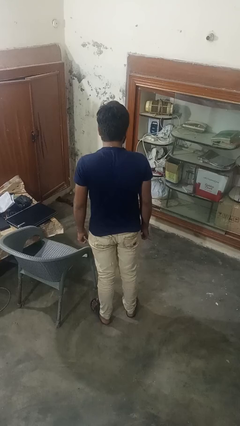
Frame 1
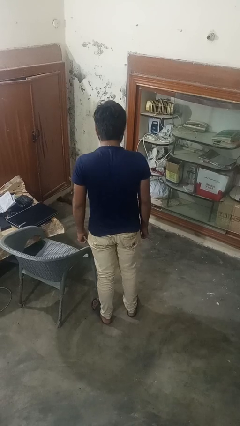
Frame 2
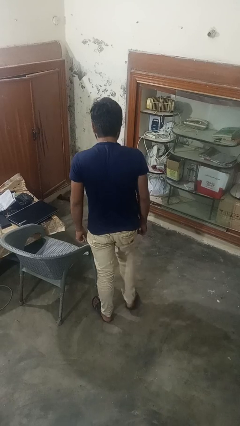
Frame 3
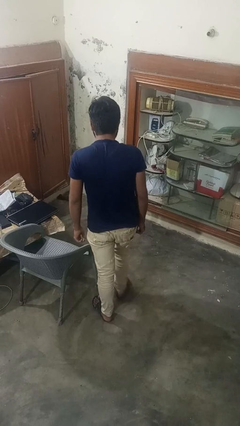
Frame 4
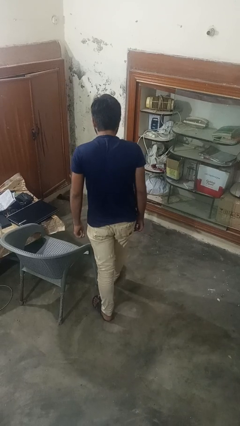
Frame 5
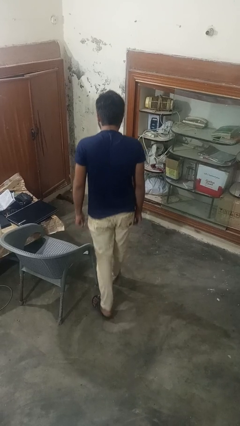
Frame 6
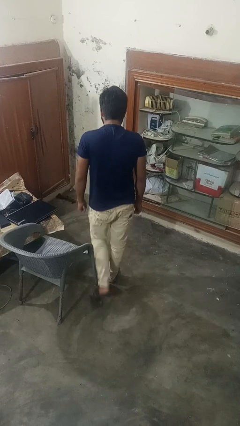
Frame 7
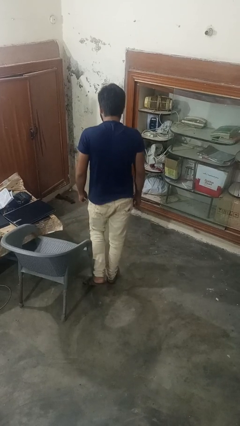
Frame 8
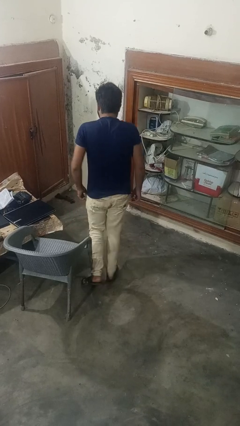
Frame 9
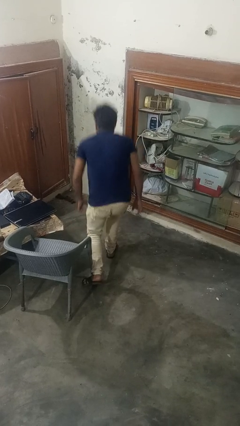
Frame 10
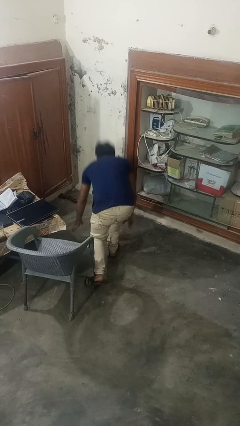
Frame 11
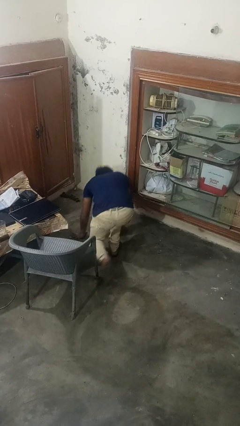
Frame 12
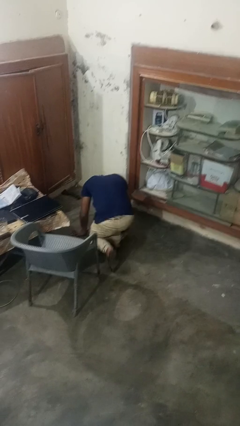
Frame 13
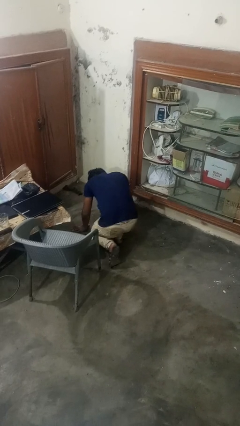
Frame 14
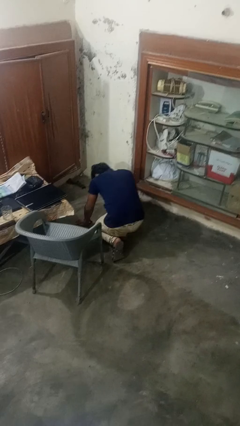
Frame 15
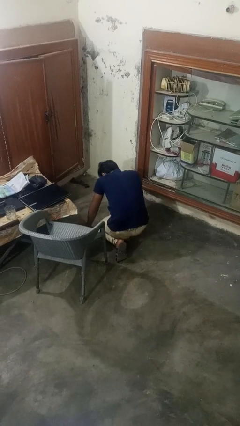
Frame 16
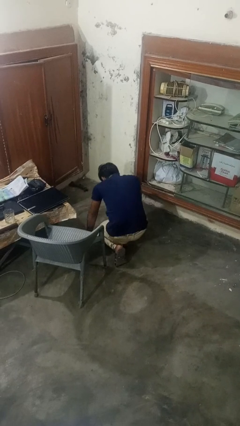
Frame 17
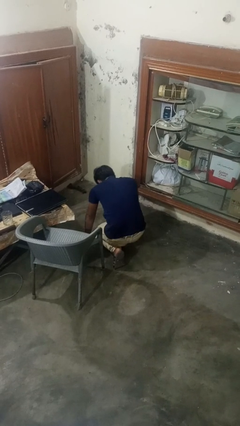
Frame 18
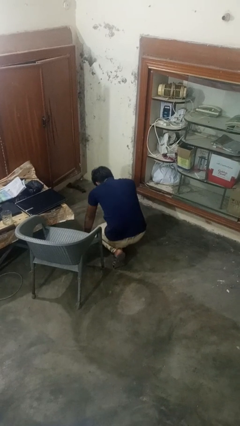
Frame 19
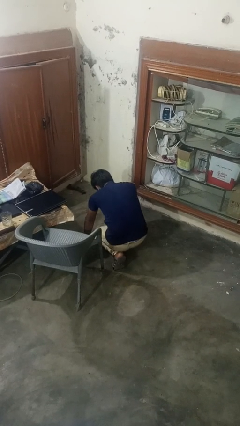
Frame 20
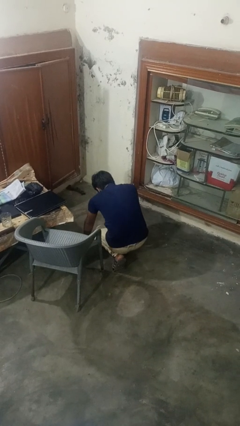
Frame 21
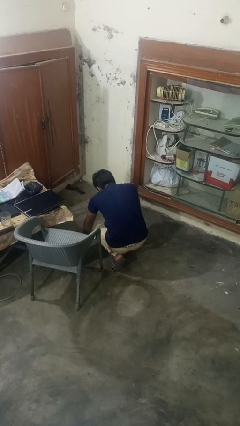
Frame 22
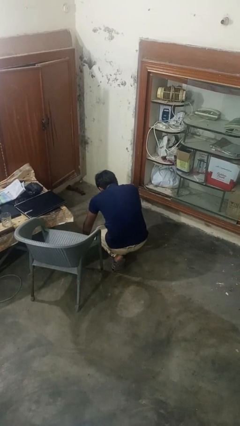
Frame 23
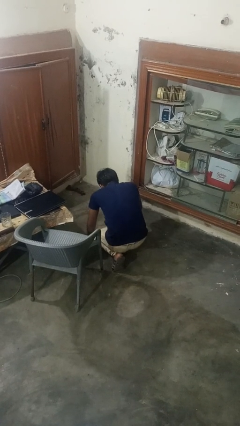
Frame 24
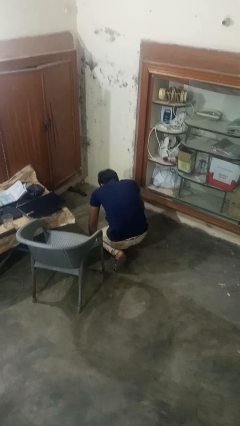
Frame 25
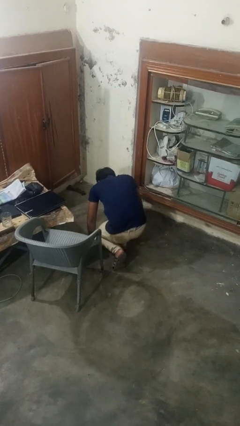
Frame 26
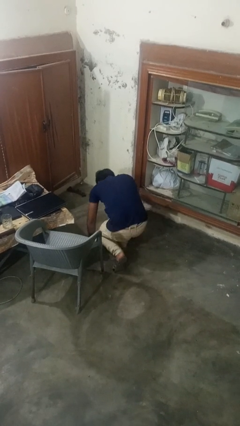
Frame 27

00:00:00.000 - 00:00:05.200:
person trips on object on floor

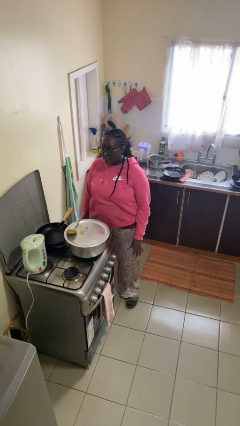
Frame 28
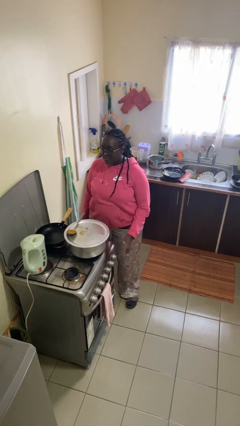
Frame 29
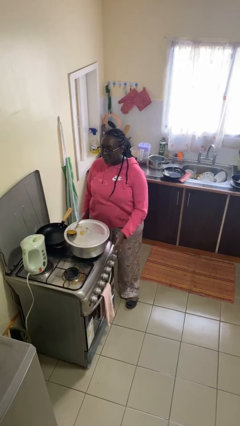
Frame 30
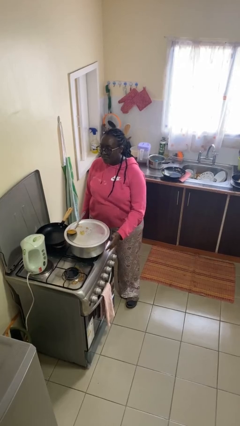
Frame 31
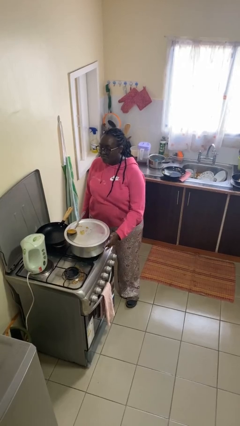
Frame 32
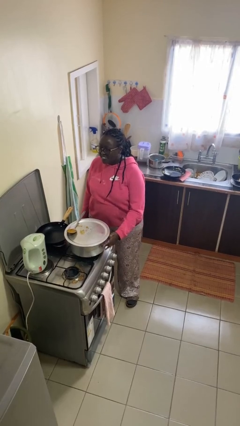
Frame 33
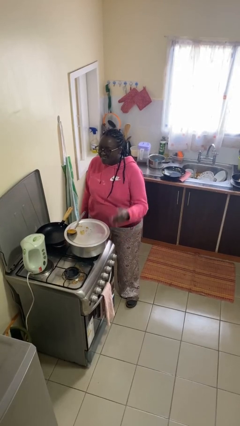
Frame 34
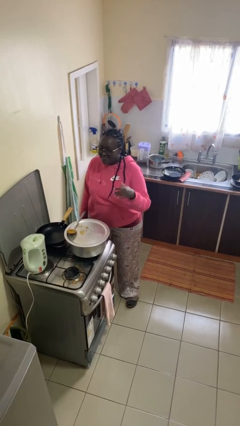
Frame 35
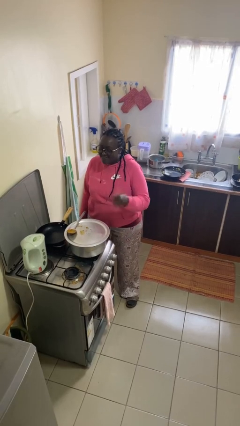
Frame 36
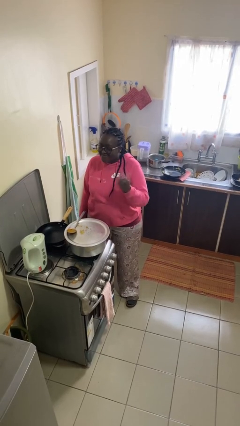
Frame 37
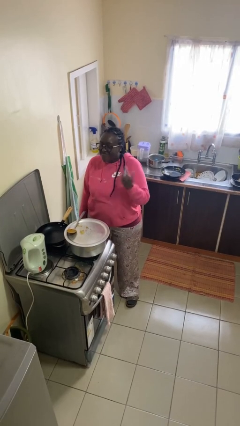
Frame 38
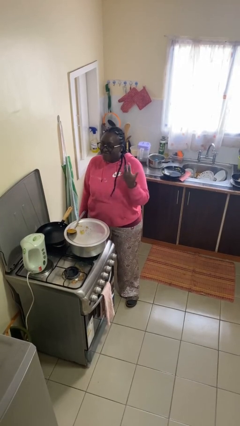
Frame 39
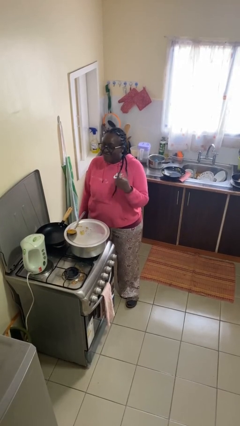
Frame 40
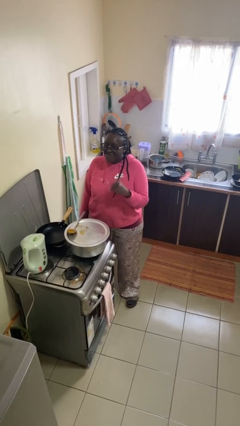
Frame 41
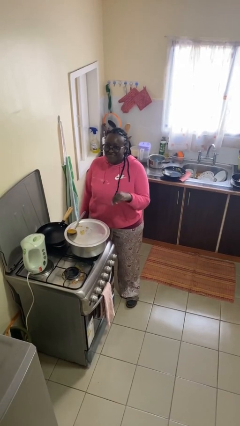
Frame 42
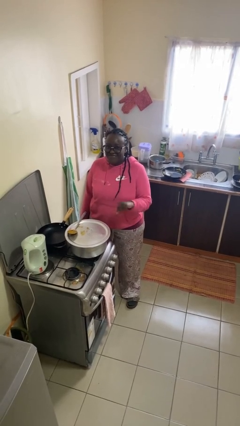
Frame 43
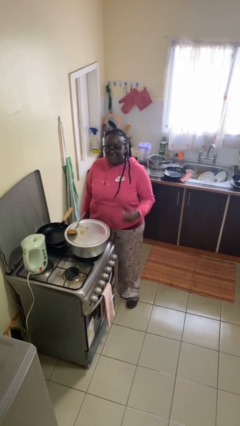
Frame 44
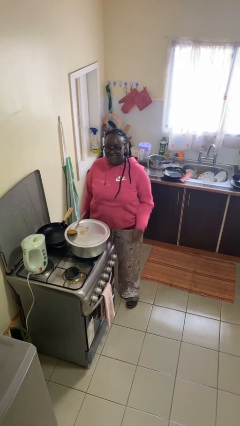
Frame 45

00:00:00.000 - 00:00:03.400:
person burns hand

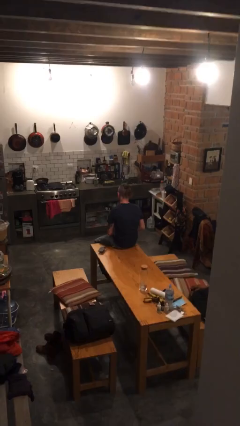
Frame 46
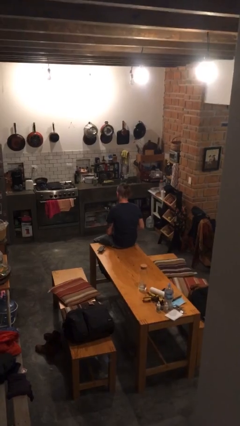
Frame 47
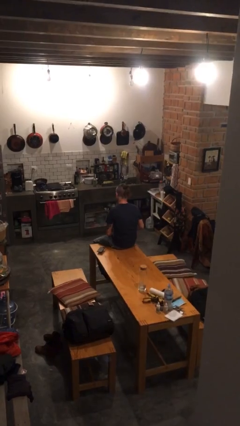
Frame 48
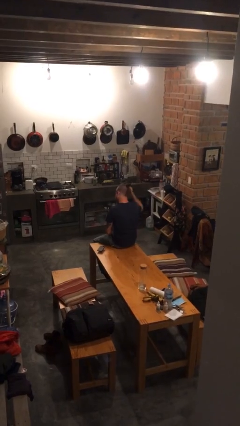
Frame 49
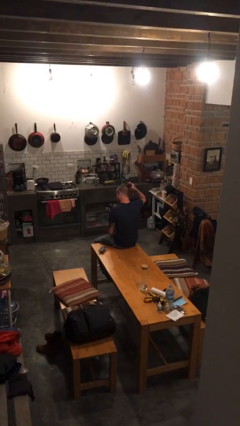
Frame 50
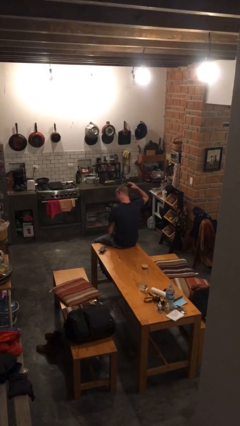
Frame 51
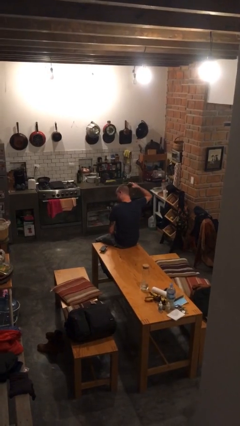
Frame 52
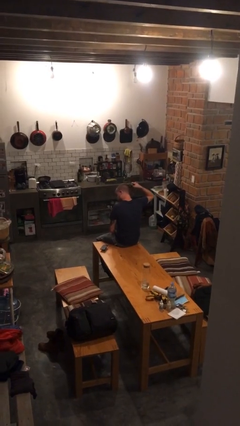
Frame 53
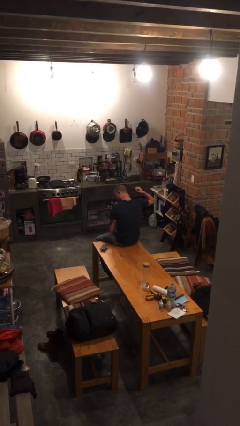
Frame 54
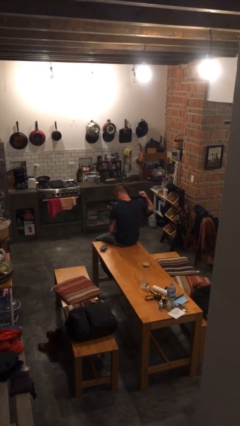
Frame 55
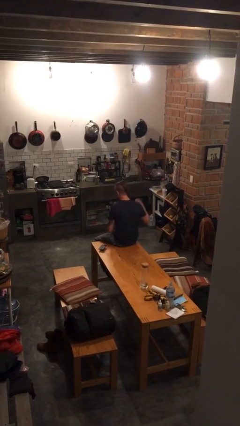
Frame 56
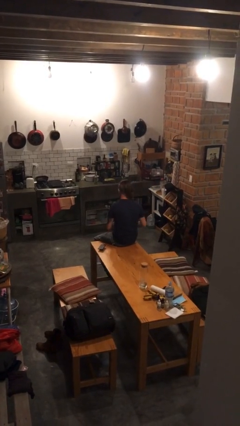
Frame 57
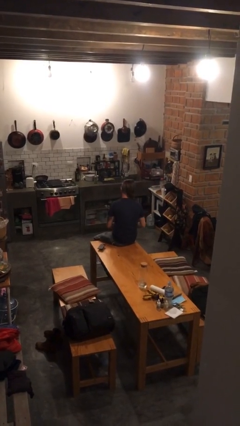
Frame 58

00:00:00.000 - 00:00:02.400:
person takes off hairtie

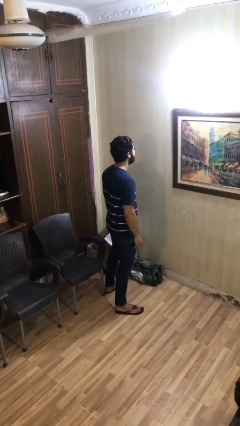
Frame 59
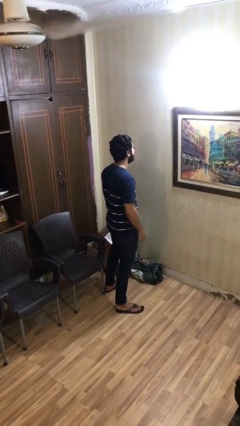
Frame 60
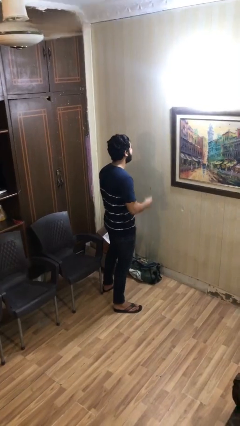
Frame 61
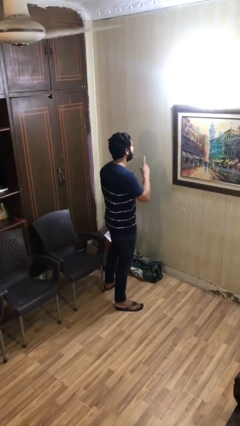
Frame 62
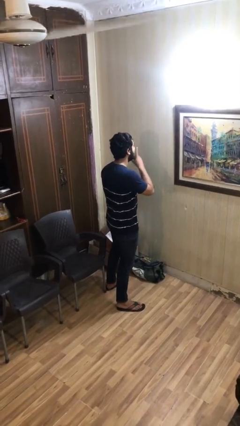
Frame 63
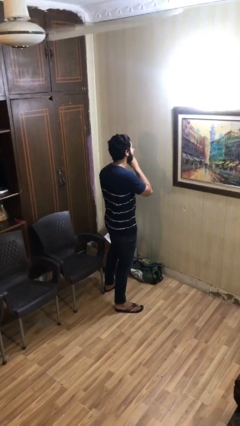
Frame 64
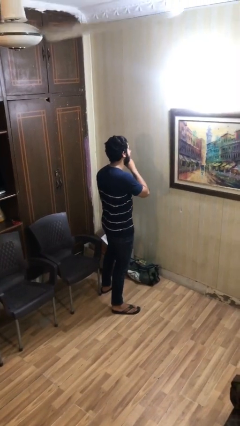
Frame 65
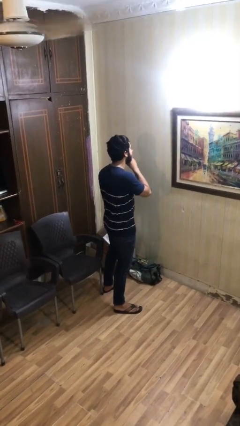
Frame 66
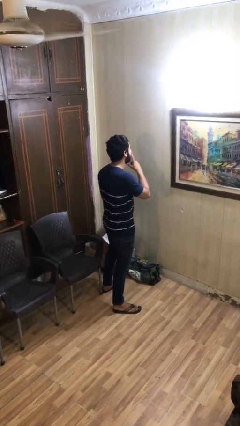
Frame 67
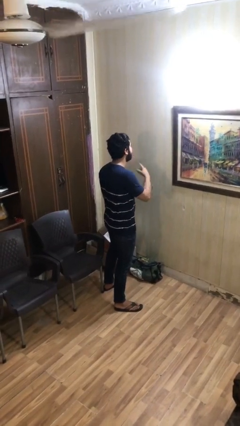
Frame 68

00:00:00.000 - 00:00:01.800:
person gestures be quiet

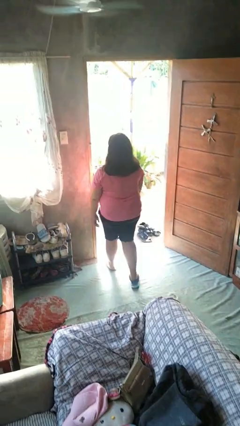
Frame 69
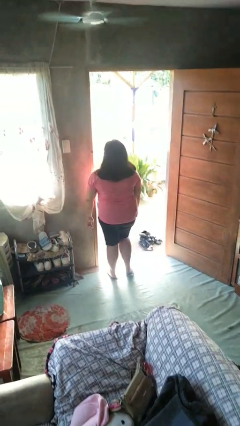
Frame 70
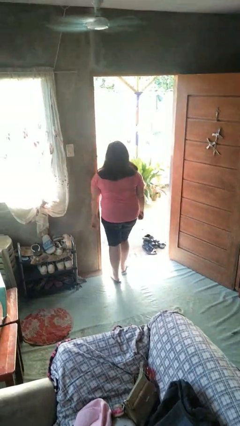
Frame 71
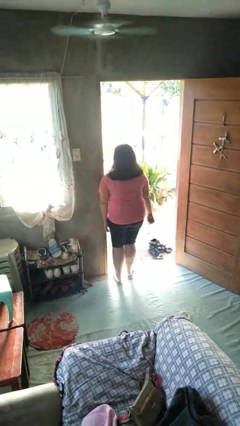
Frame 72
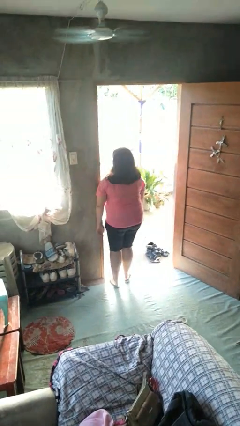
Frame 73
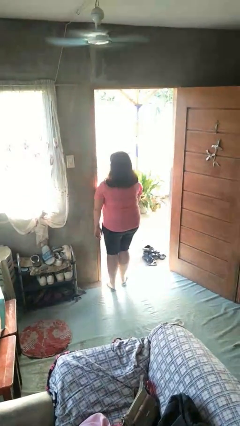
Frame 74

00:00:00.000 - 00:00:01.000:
person bumps into wall

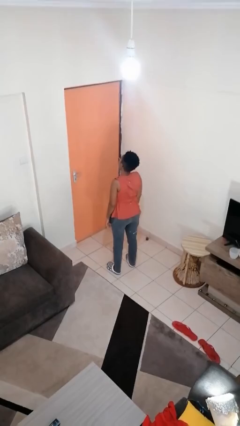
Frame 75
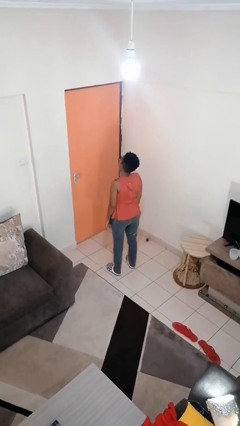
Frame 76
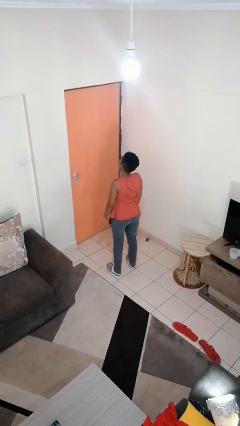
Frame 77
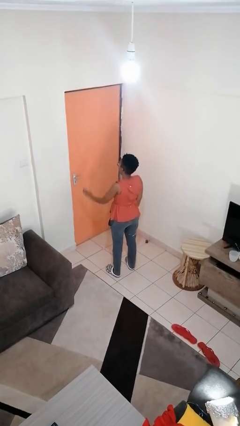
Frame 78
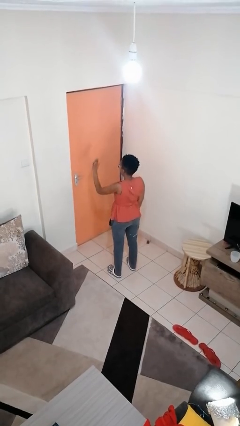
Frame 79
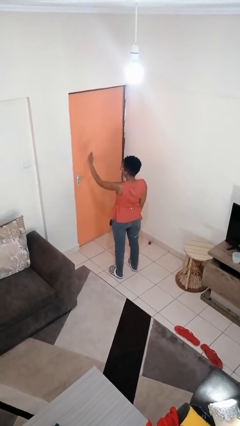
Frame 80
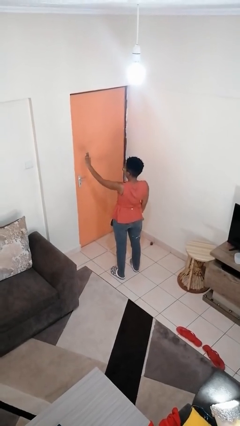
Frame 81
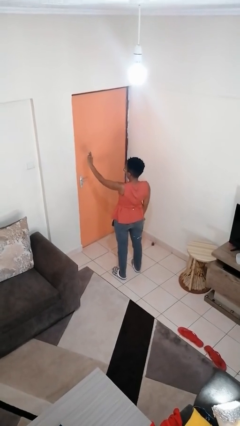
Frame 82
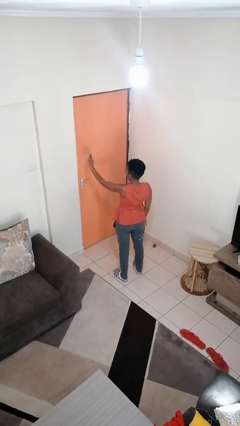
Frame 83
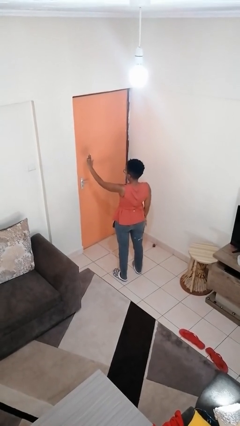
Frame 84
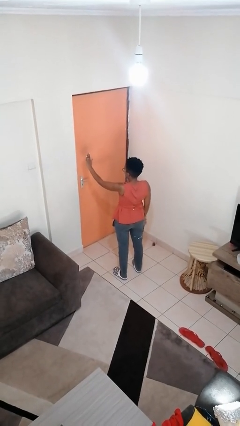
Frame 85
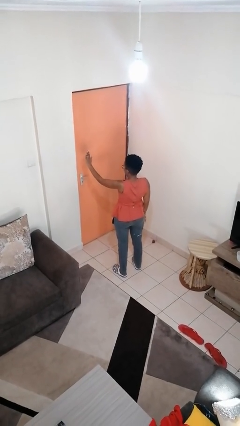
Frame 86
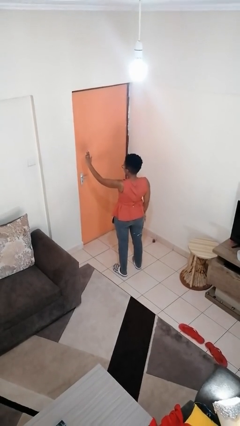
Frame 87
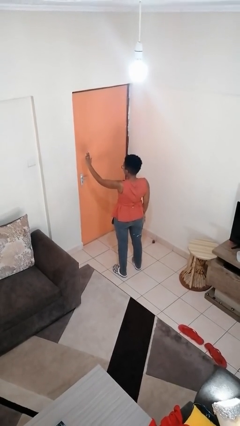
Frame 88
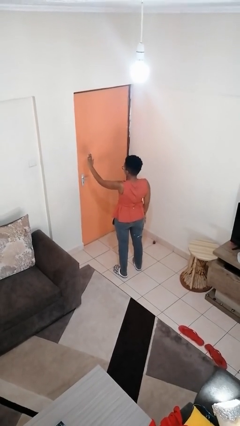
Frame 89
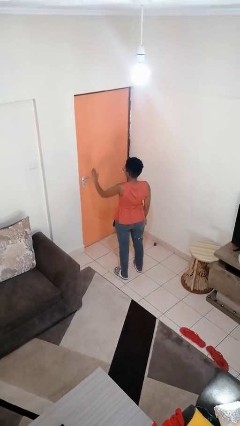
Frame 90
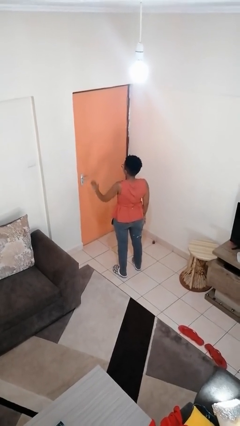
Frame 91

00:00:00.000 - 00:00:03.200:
person gestures stop
